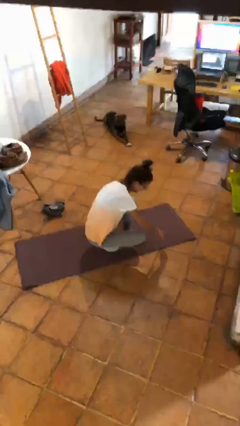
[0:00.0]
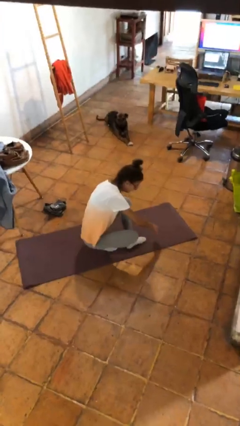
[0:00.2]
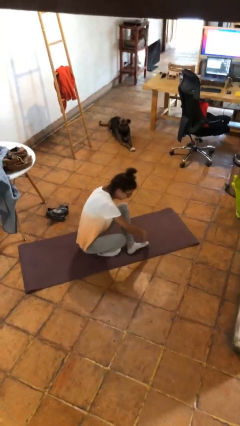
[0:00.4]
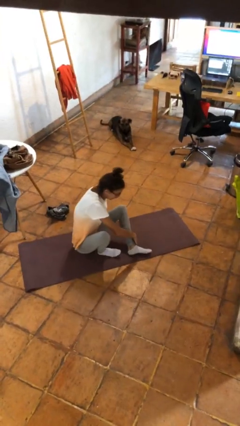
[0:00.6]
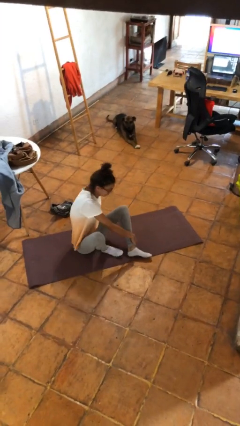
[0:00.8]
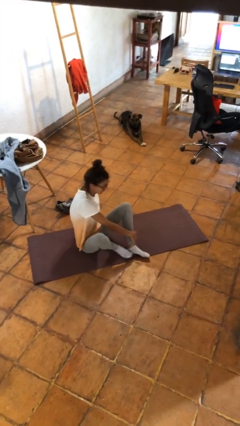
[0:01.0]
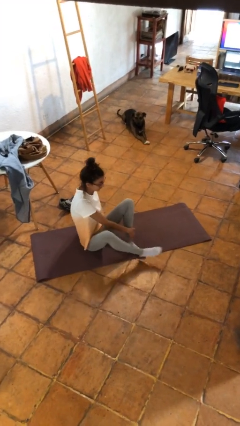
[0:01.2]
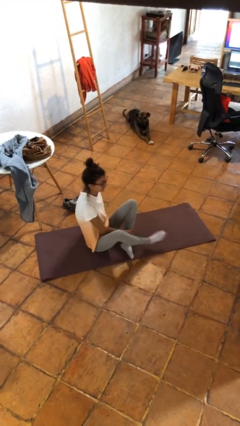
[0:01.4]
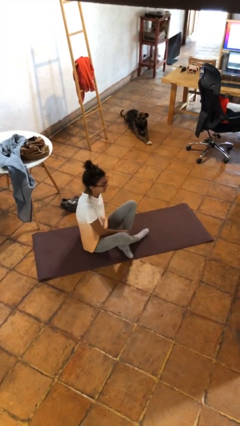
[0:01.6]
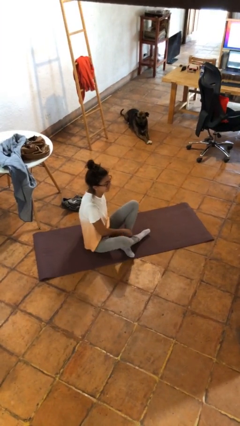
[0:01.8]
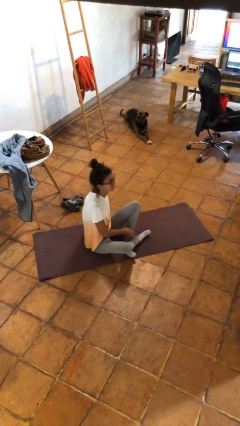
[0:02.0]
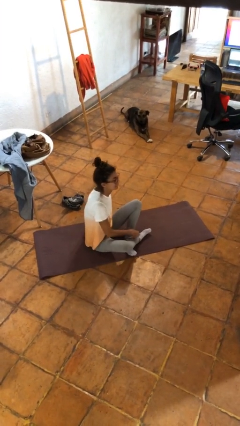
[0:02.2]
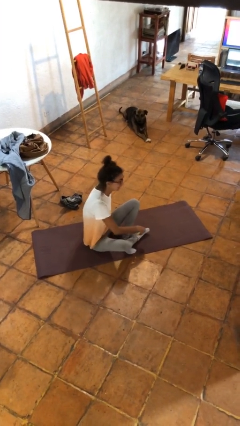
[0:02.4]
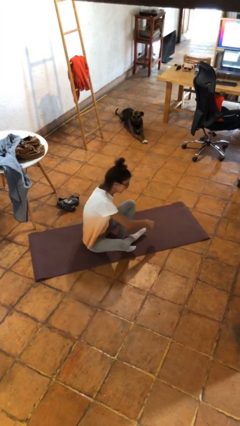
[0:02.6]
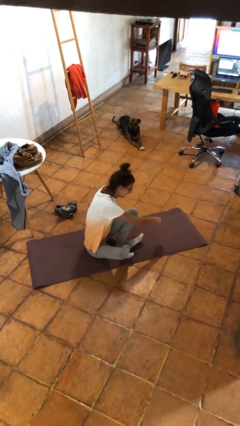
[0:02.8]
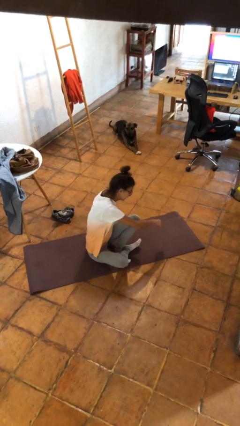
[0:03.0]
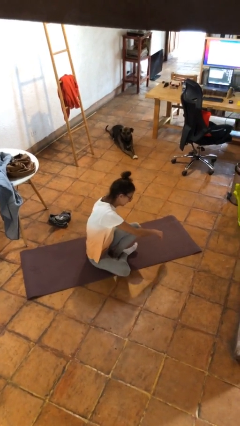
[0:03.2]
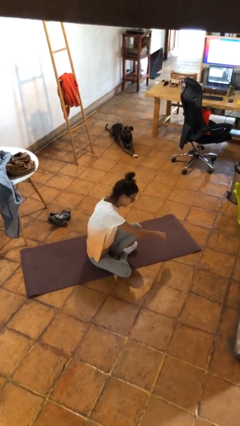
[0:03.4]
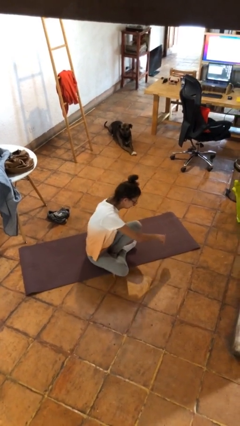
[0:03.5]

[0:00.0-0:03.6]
person sits crisscross

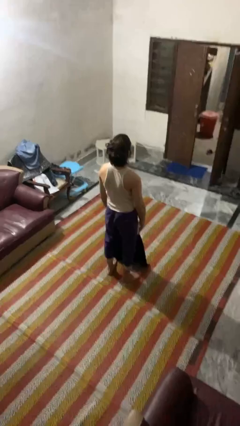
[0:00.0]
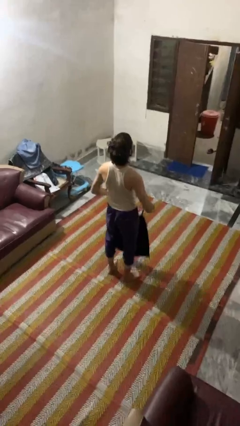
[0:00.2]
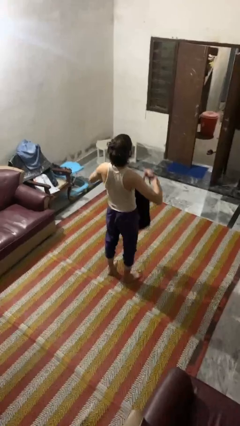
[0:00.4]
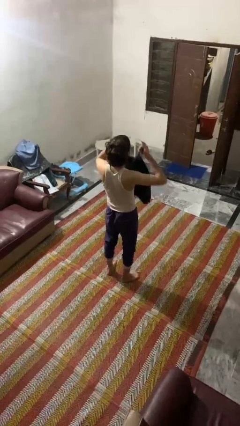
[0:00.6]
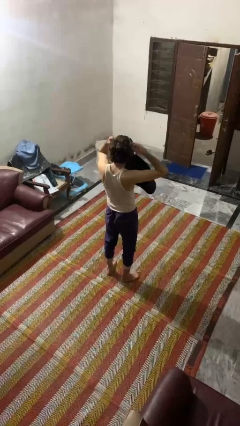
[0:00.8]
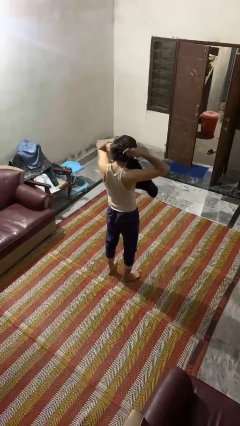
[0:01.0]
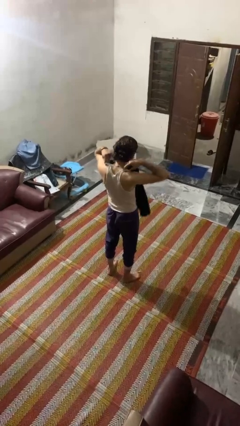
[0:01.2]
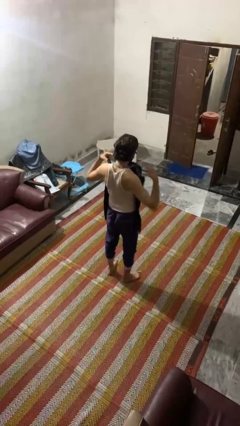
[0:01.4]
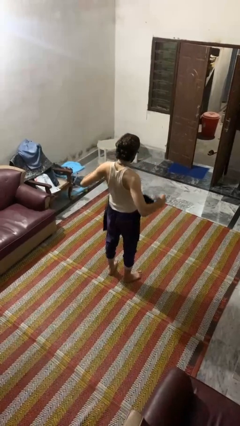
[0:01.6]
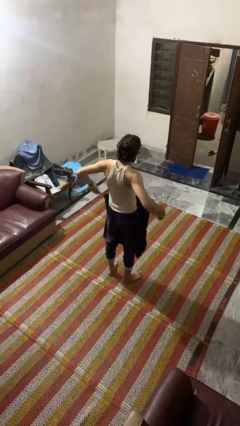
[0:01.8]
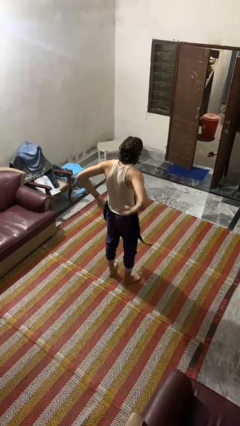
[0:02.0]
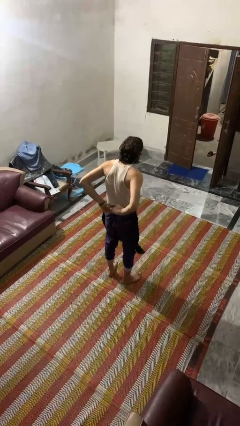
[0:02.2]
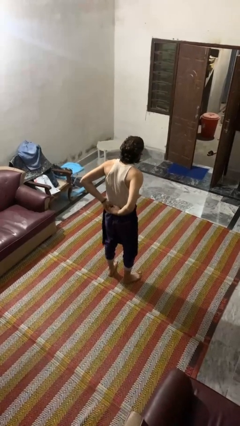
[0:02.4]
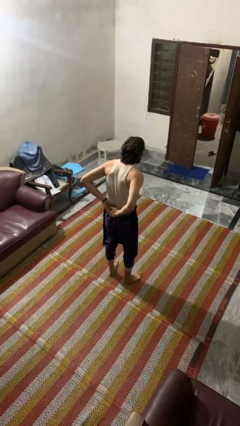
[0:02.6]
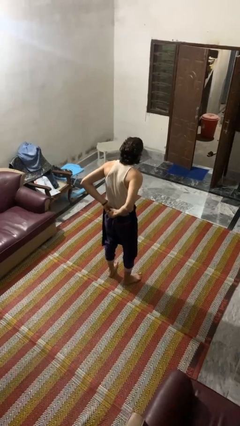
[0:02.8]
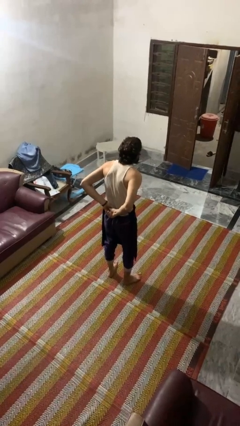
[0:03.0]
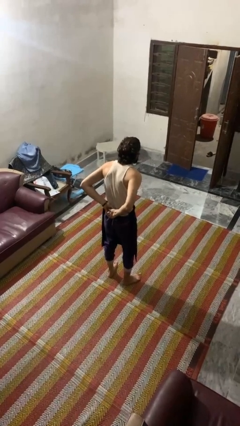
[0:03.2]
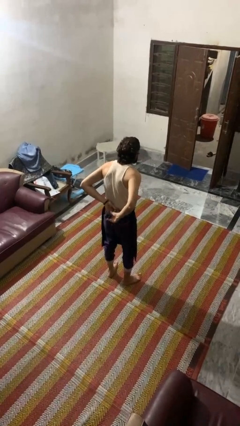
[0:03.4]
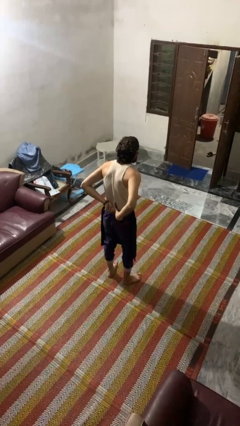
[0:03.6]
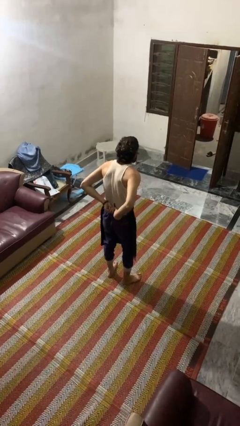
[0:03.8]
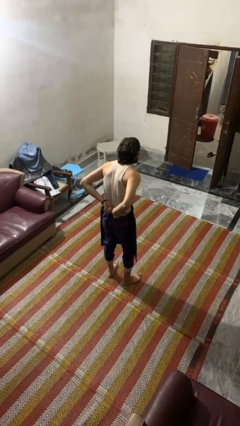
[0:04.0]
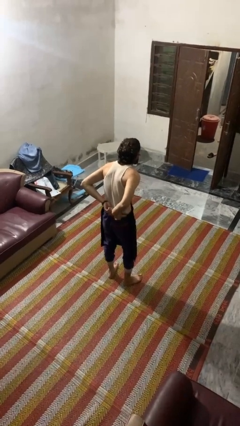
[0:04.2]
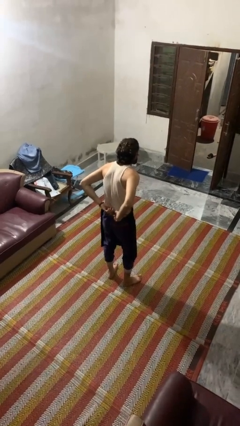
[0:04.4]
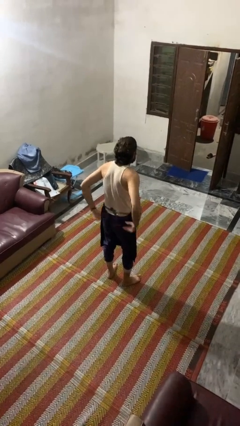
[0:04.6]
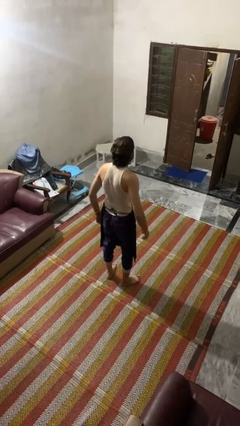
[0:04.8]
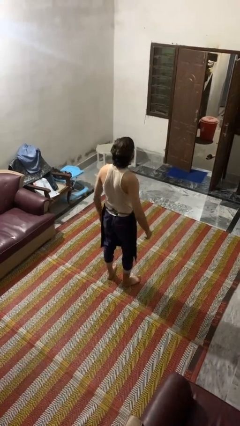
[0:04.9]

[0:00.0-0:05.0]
person puts on apron

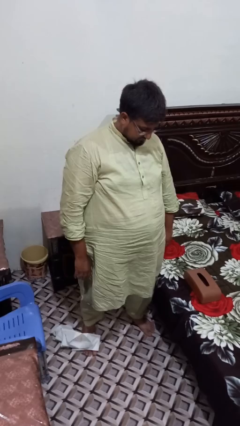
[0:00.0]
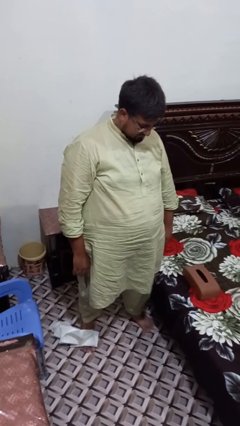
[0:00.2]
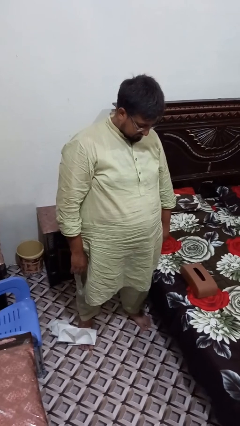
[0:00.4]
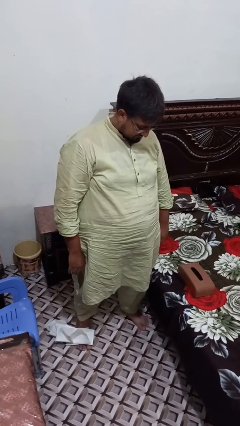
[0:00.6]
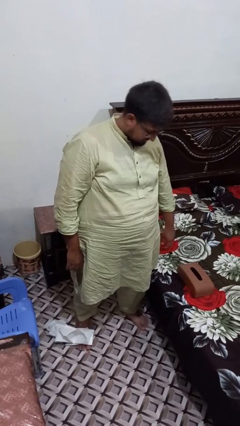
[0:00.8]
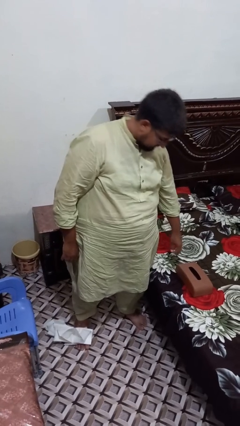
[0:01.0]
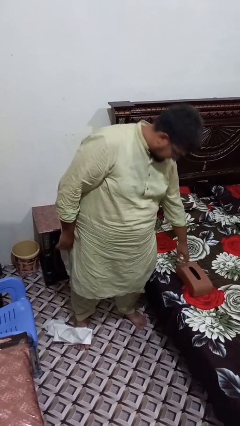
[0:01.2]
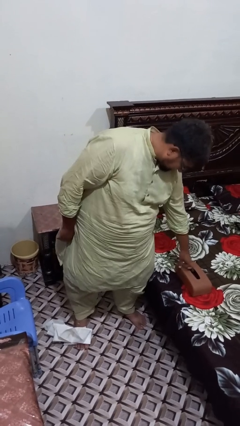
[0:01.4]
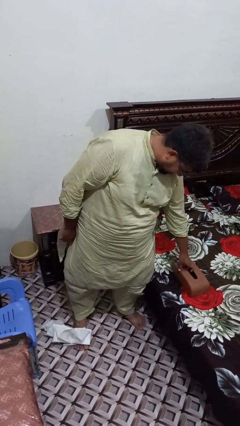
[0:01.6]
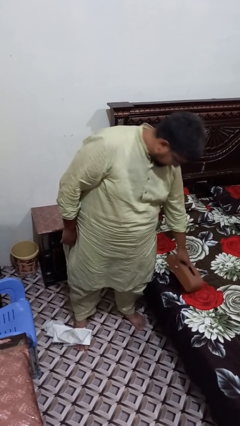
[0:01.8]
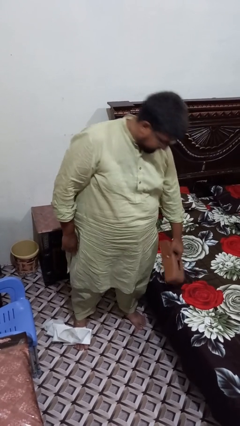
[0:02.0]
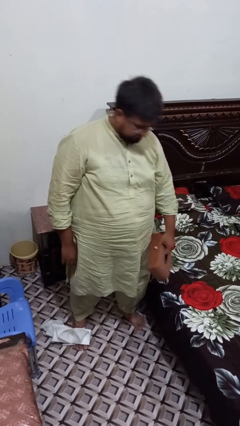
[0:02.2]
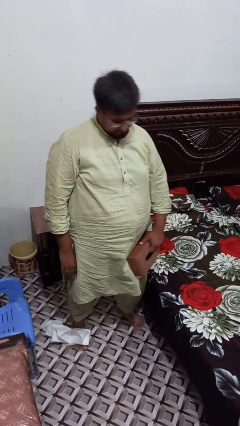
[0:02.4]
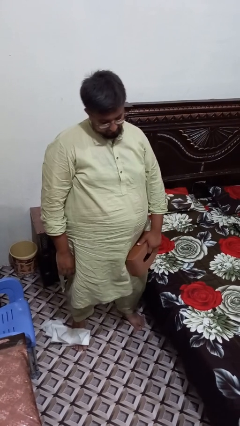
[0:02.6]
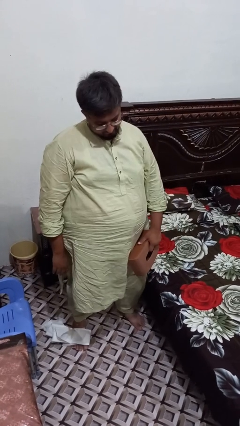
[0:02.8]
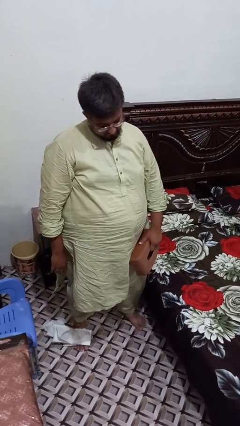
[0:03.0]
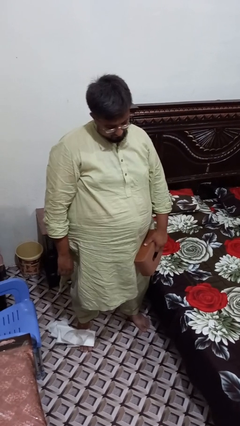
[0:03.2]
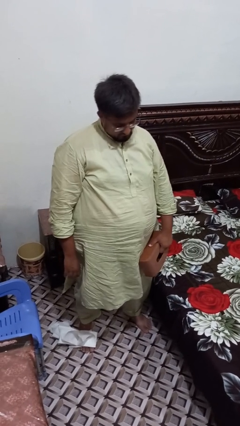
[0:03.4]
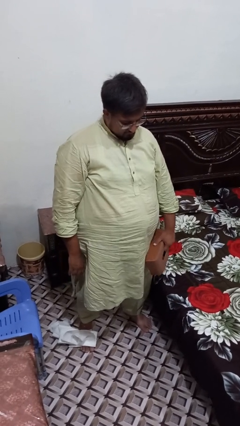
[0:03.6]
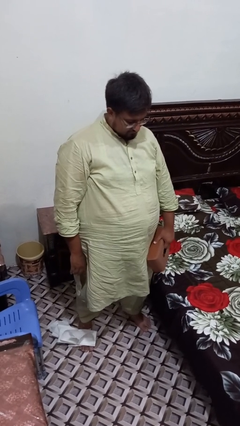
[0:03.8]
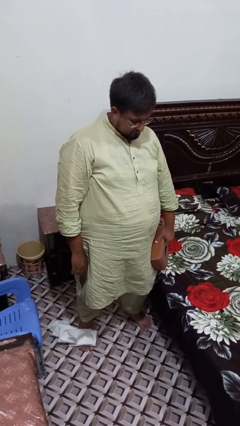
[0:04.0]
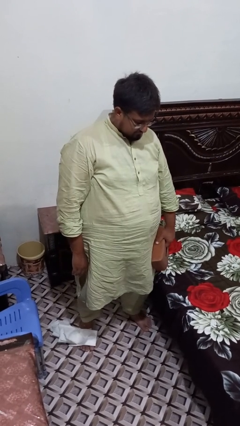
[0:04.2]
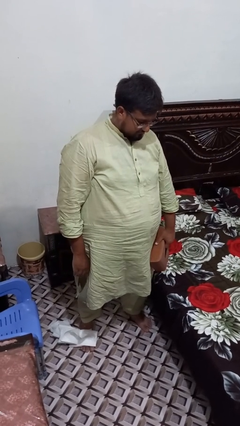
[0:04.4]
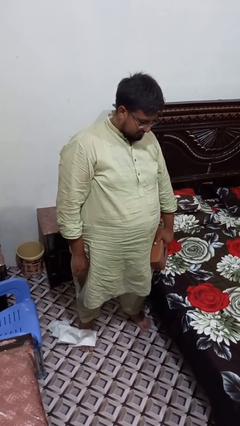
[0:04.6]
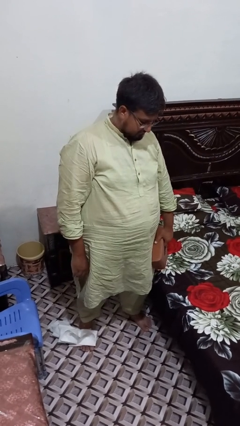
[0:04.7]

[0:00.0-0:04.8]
person picks up object from bed

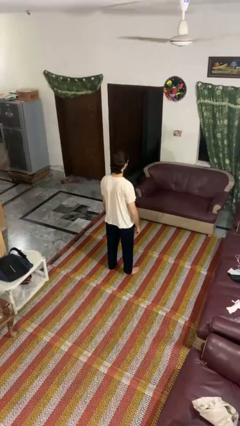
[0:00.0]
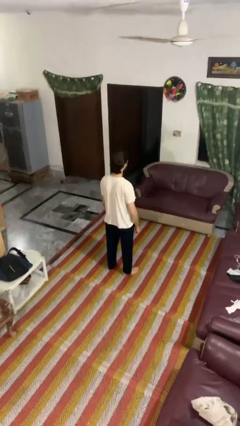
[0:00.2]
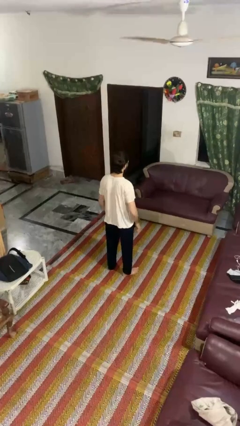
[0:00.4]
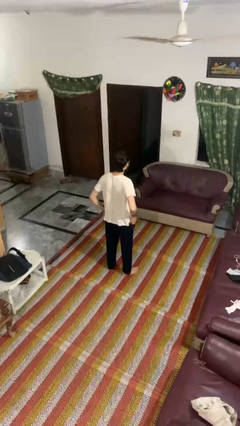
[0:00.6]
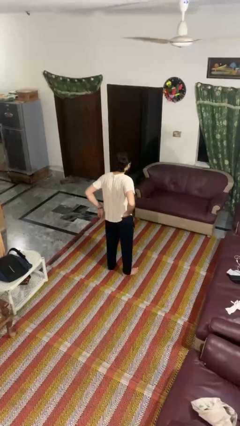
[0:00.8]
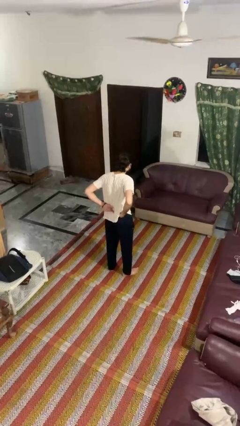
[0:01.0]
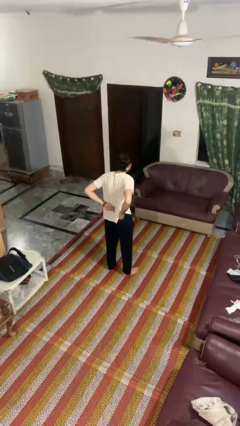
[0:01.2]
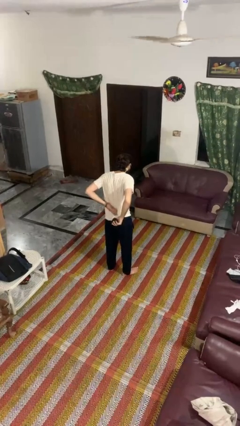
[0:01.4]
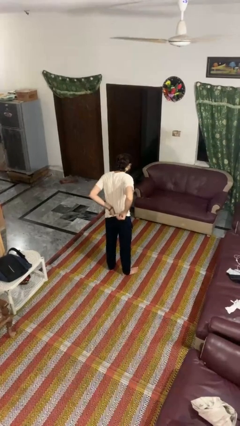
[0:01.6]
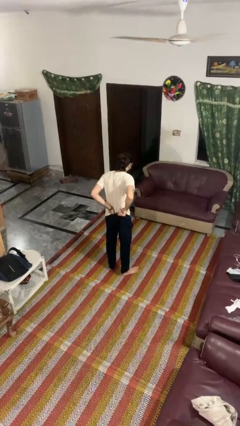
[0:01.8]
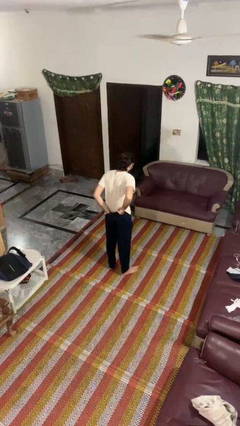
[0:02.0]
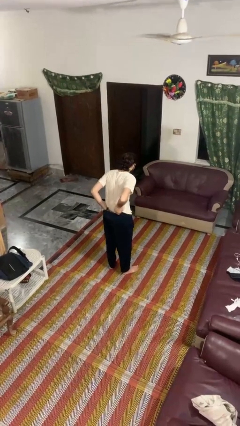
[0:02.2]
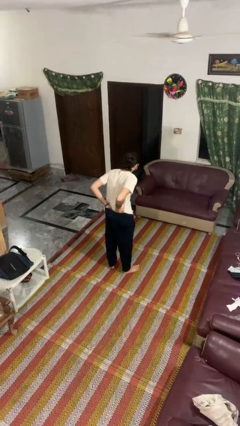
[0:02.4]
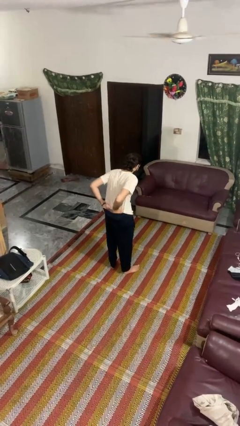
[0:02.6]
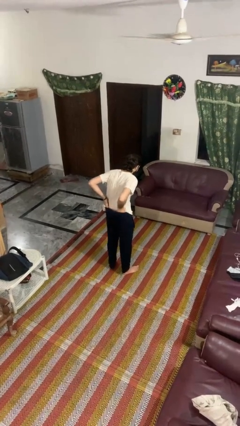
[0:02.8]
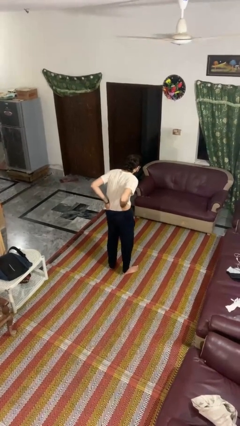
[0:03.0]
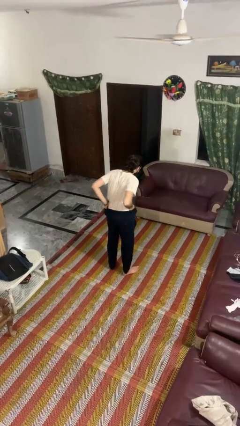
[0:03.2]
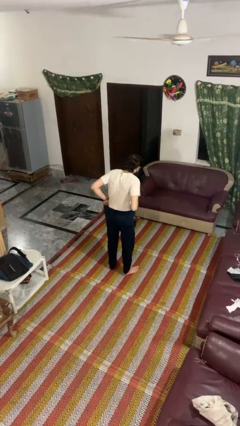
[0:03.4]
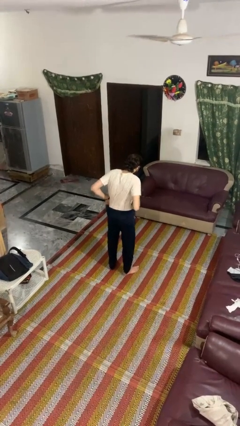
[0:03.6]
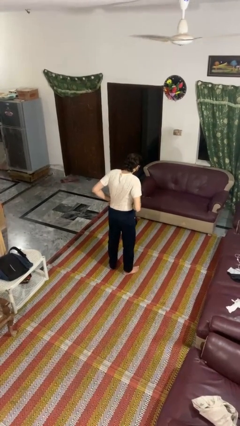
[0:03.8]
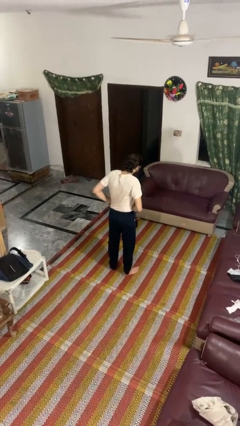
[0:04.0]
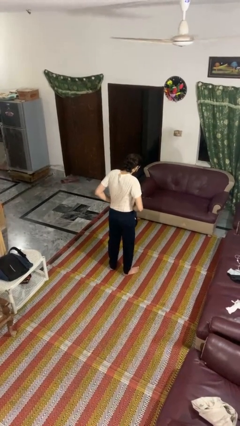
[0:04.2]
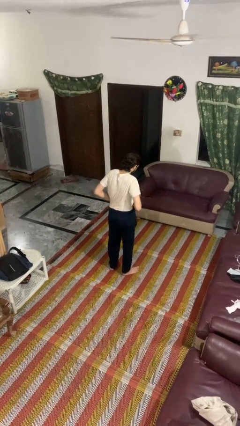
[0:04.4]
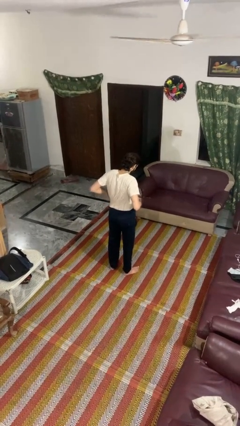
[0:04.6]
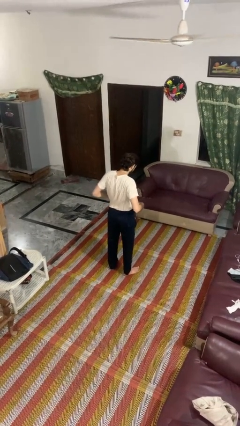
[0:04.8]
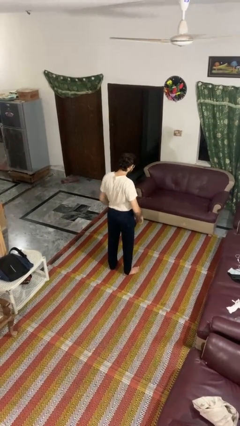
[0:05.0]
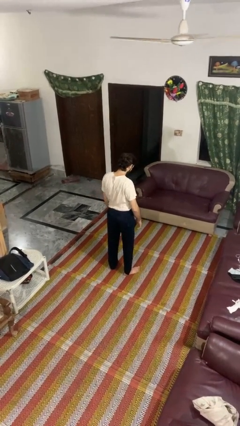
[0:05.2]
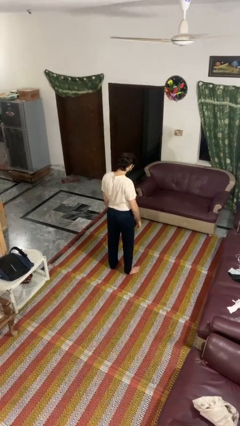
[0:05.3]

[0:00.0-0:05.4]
person tucks in shirt
